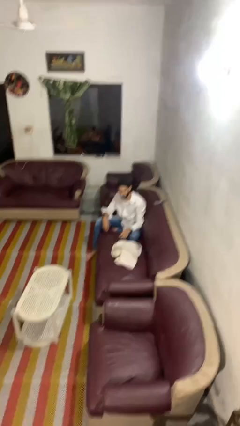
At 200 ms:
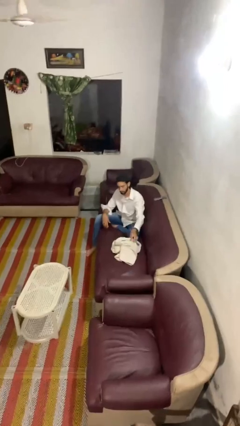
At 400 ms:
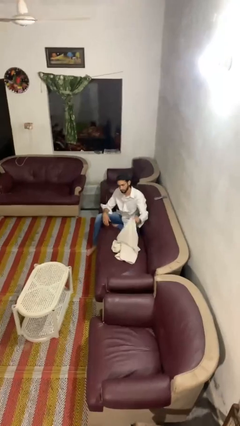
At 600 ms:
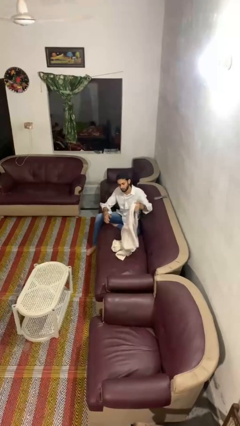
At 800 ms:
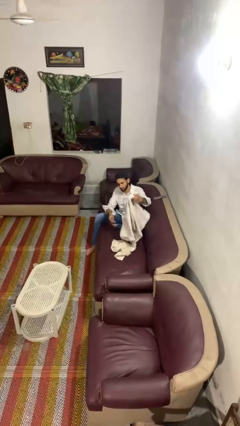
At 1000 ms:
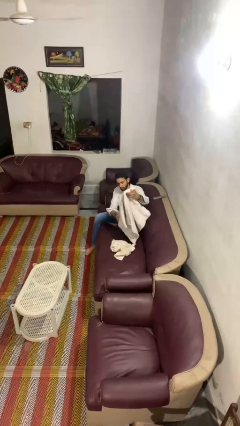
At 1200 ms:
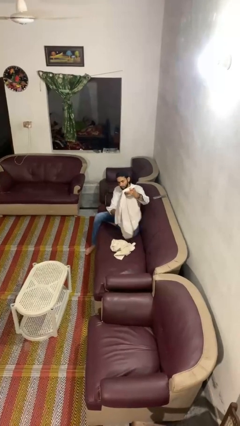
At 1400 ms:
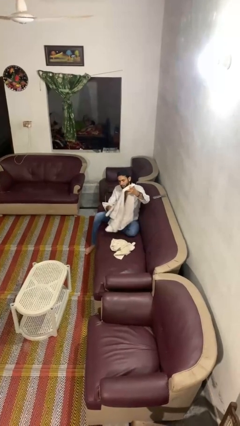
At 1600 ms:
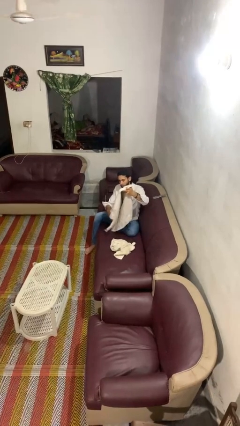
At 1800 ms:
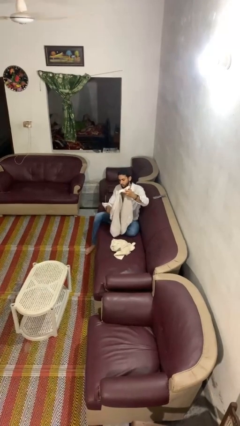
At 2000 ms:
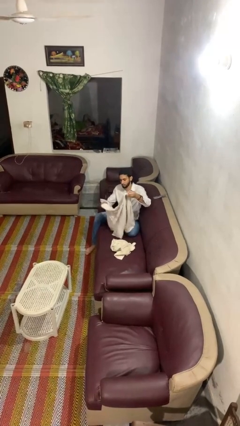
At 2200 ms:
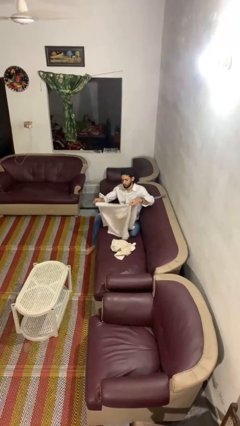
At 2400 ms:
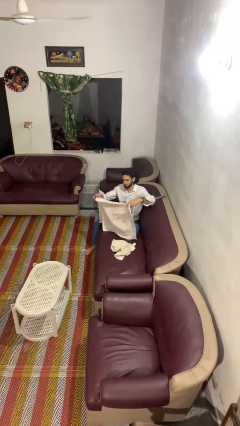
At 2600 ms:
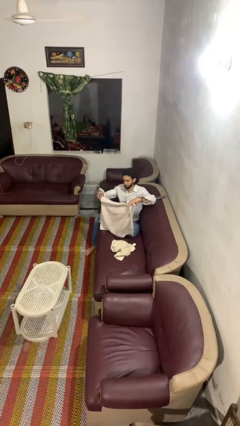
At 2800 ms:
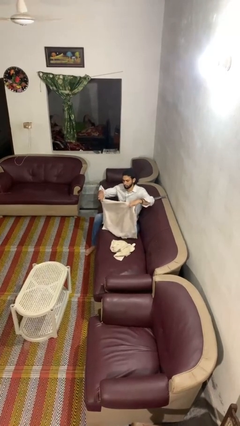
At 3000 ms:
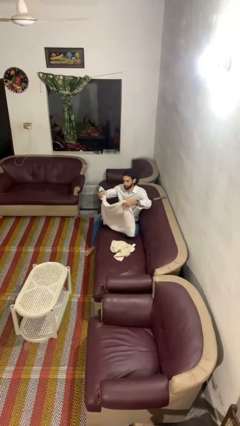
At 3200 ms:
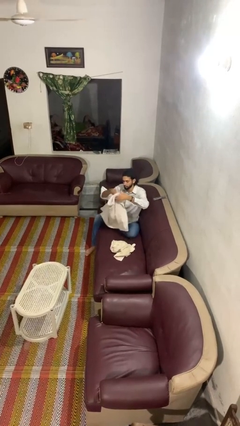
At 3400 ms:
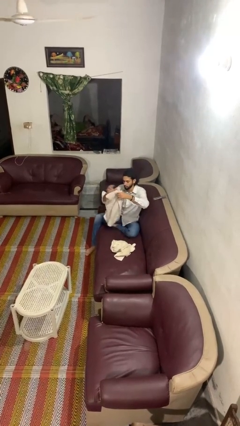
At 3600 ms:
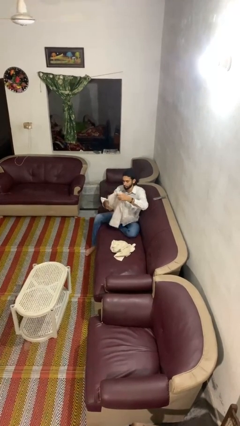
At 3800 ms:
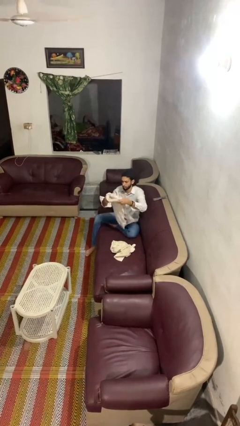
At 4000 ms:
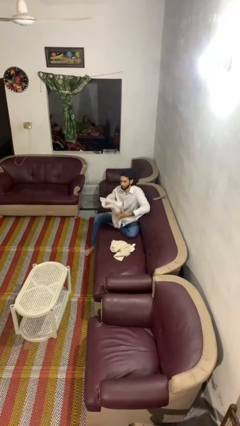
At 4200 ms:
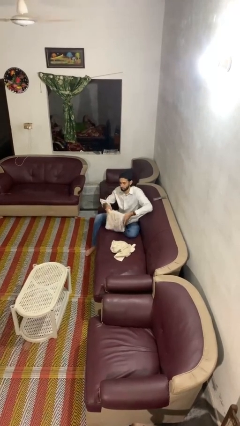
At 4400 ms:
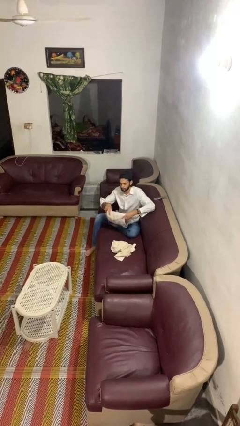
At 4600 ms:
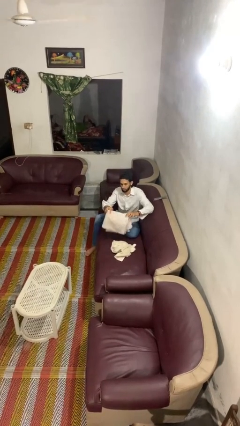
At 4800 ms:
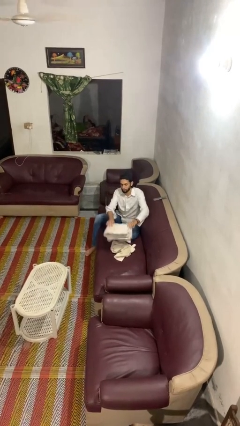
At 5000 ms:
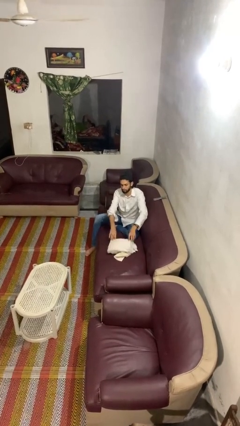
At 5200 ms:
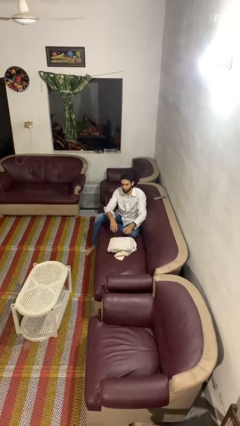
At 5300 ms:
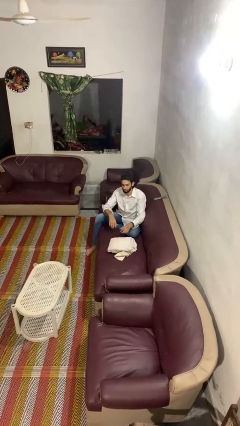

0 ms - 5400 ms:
person folds towel

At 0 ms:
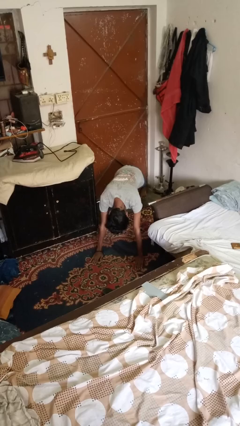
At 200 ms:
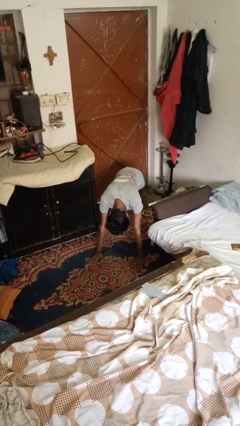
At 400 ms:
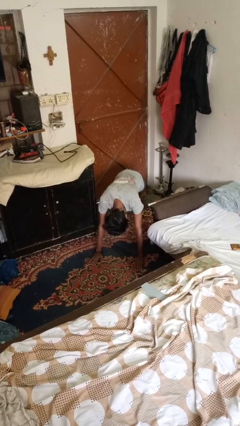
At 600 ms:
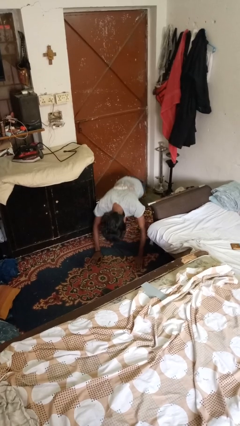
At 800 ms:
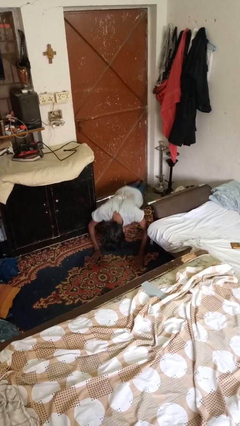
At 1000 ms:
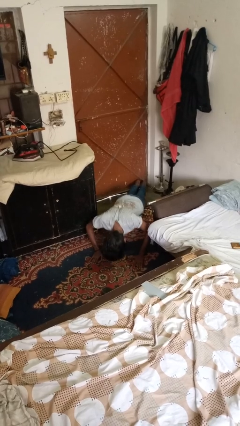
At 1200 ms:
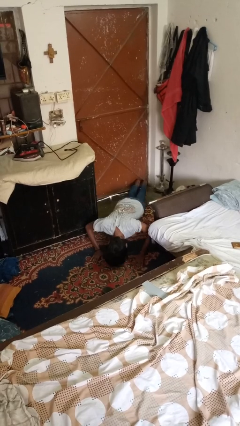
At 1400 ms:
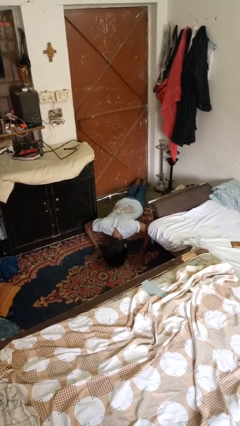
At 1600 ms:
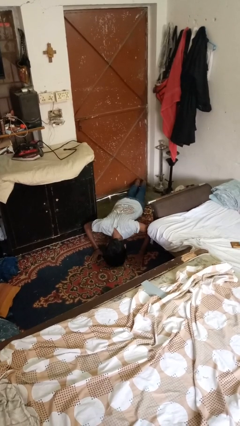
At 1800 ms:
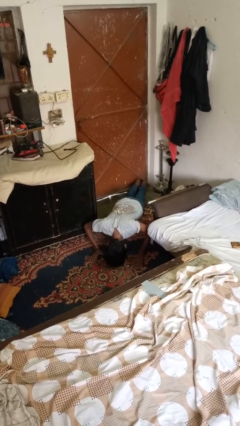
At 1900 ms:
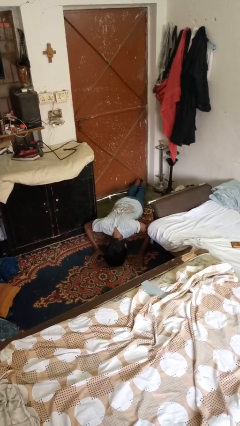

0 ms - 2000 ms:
person exercises with pushup

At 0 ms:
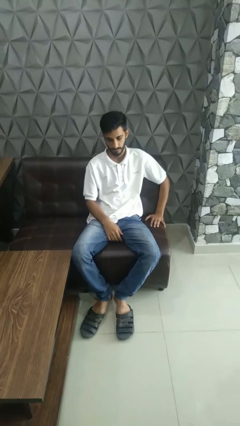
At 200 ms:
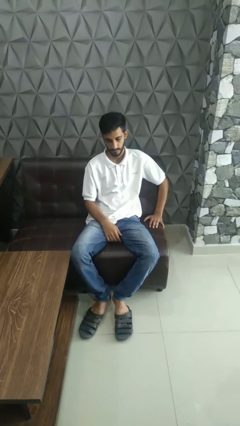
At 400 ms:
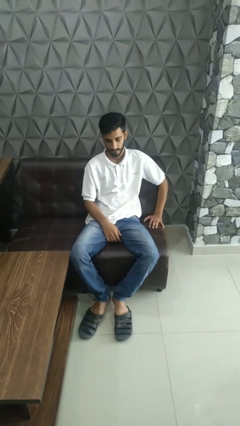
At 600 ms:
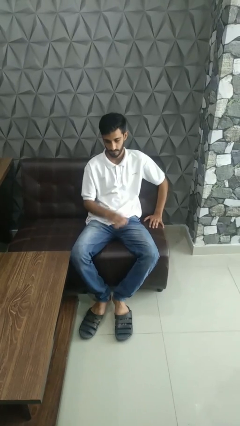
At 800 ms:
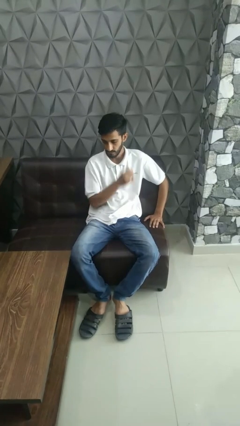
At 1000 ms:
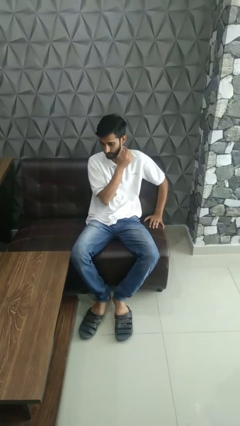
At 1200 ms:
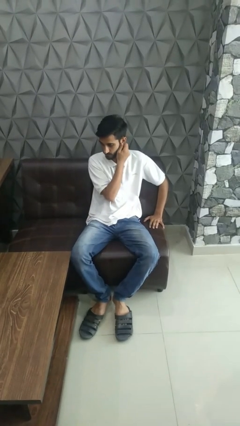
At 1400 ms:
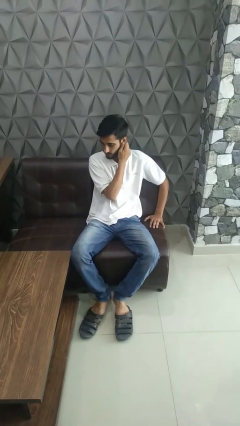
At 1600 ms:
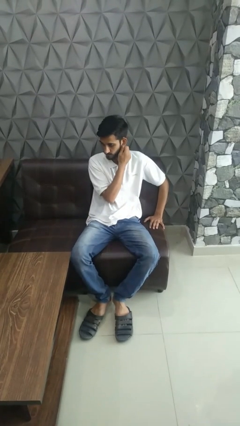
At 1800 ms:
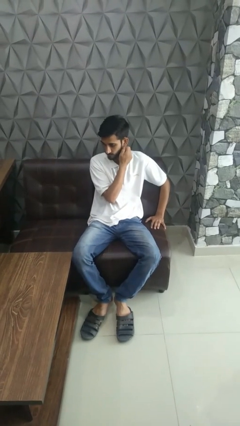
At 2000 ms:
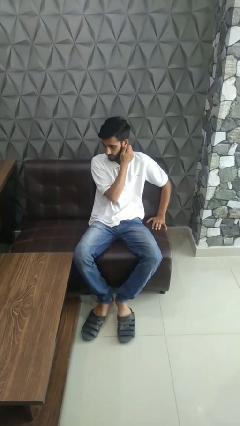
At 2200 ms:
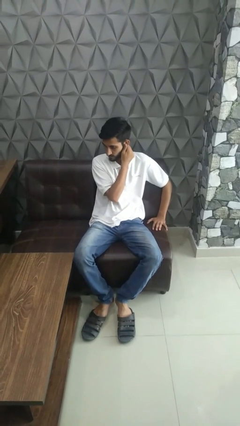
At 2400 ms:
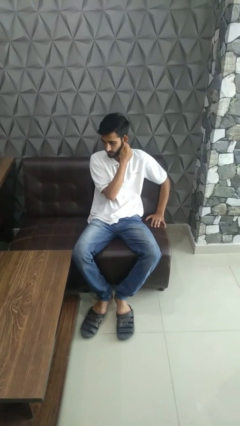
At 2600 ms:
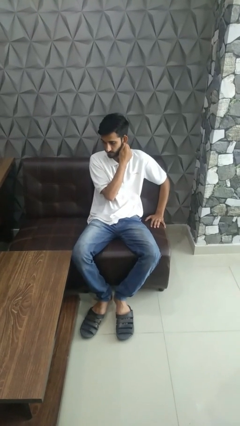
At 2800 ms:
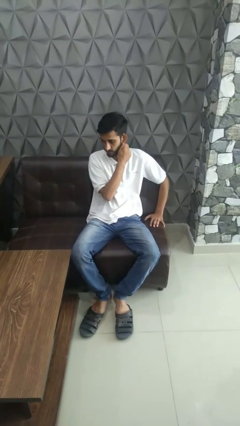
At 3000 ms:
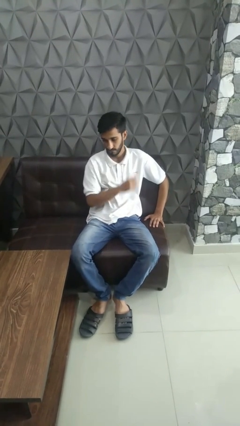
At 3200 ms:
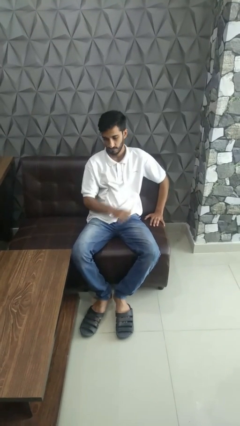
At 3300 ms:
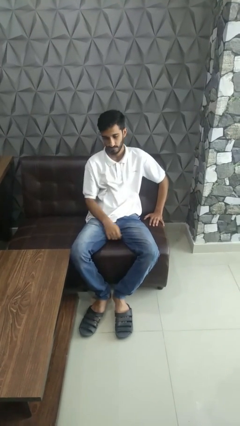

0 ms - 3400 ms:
person touches earlobe

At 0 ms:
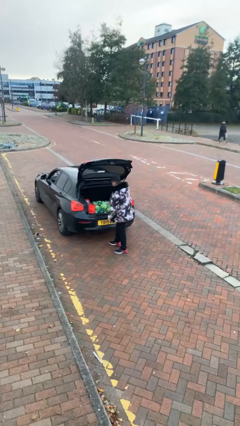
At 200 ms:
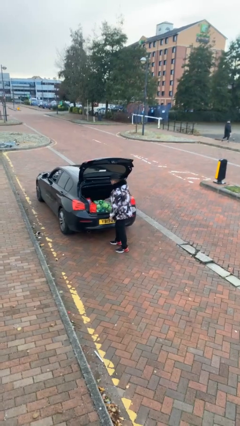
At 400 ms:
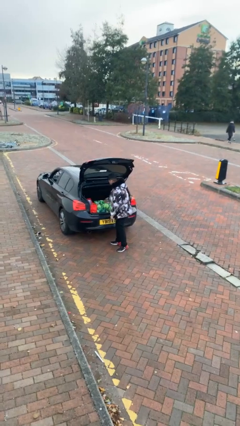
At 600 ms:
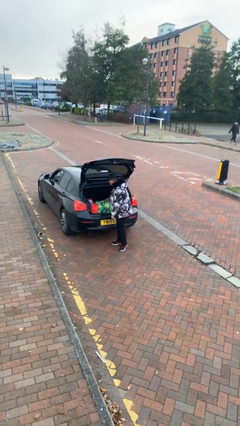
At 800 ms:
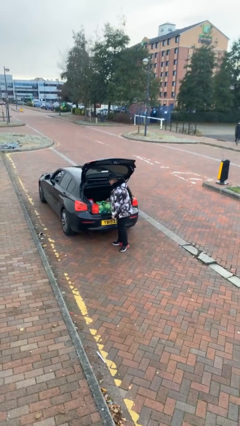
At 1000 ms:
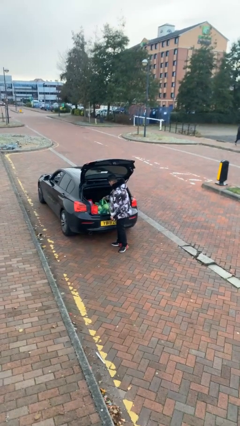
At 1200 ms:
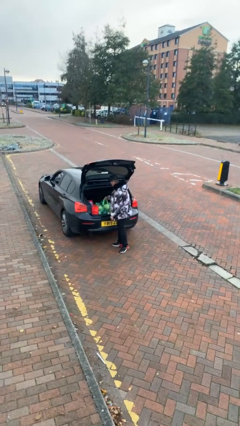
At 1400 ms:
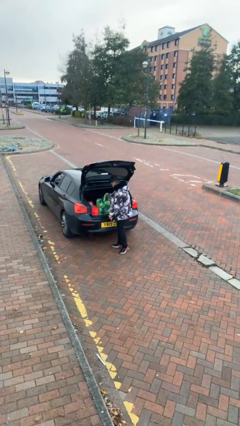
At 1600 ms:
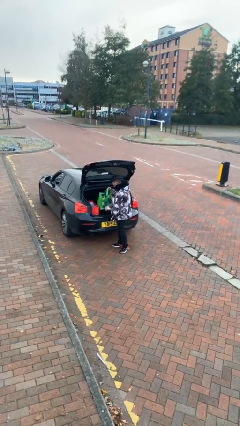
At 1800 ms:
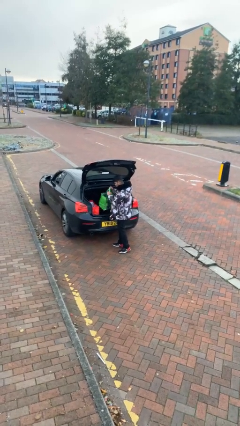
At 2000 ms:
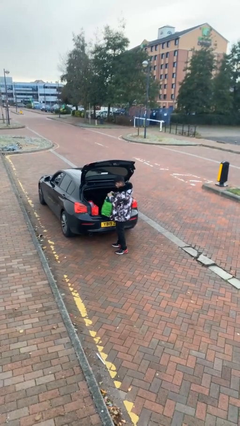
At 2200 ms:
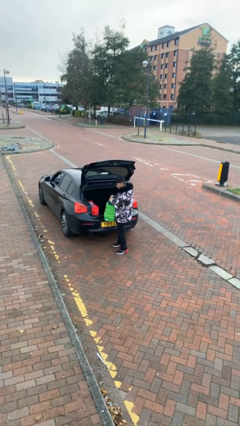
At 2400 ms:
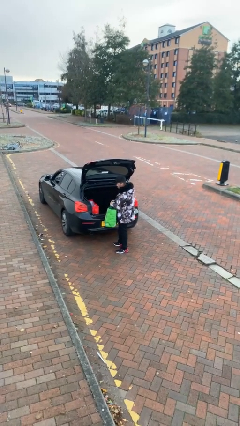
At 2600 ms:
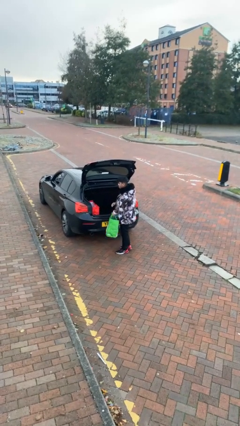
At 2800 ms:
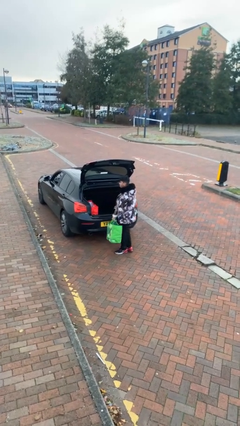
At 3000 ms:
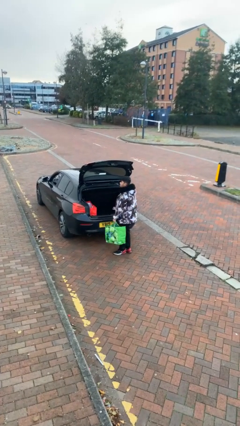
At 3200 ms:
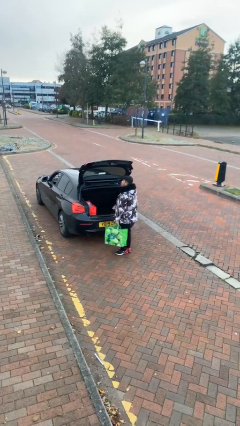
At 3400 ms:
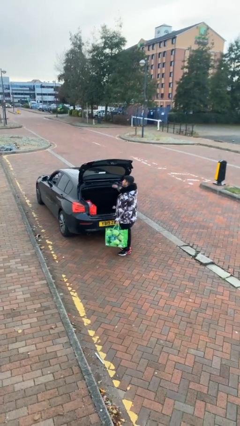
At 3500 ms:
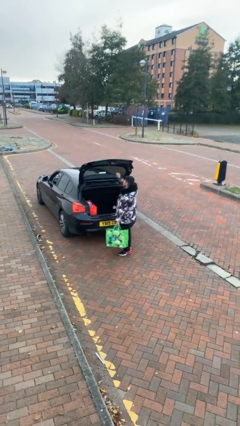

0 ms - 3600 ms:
person unloads car

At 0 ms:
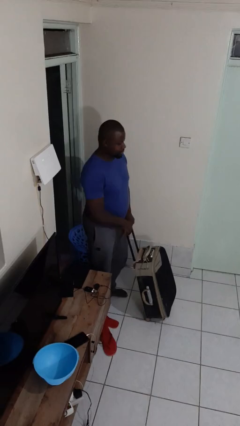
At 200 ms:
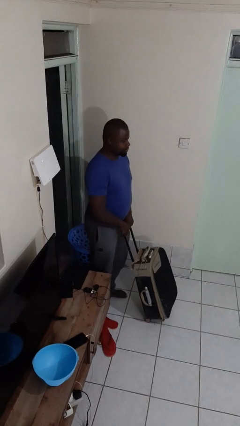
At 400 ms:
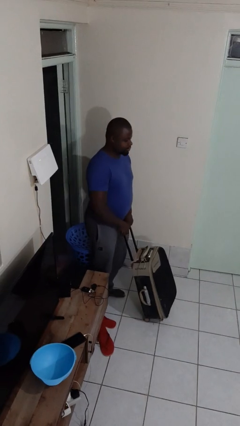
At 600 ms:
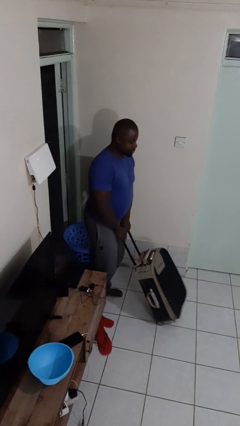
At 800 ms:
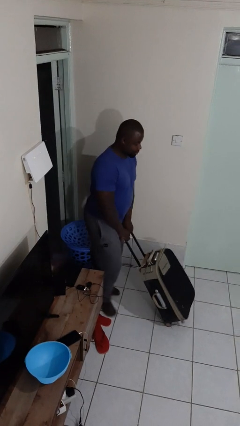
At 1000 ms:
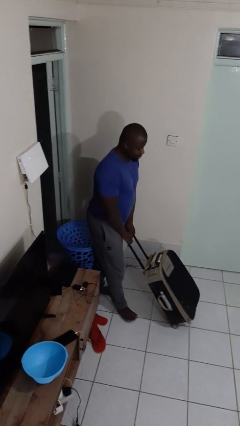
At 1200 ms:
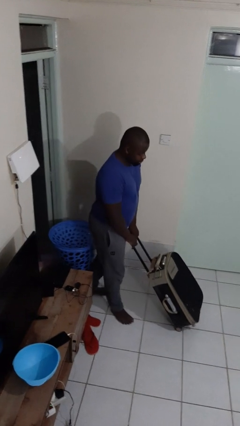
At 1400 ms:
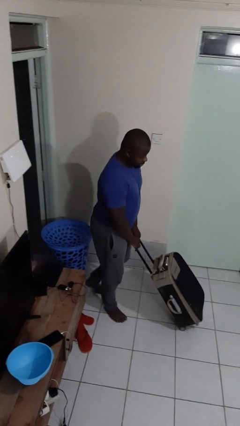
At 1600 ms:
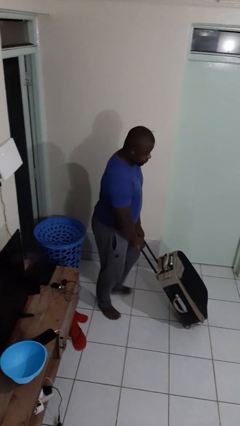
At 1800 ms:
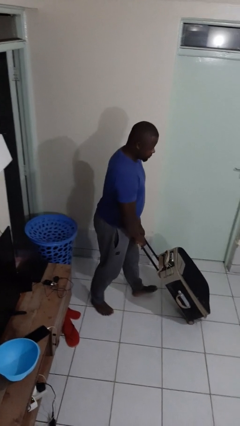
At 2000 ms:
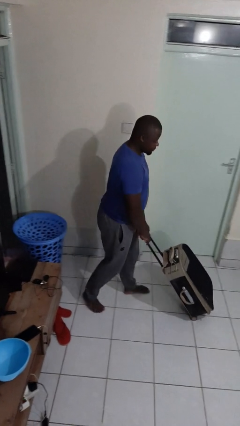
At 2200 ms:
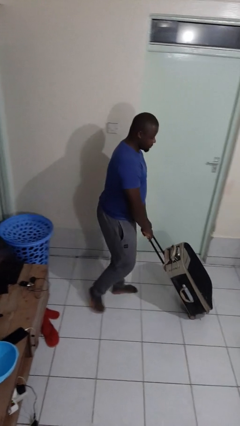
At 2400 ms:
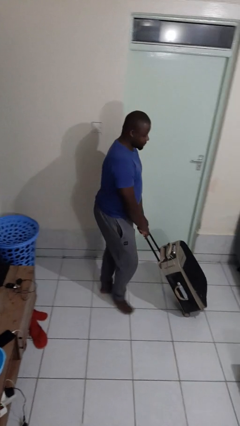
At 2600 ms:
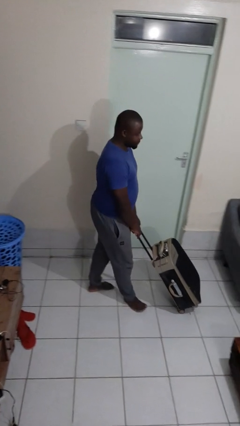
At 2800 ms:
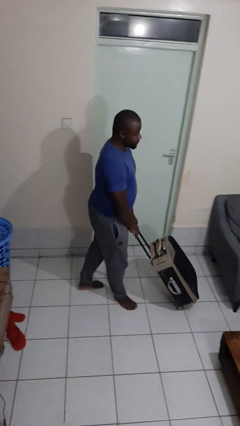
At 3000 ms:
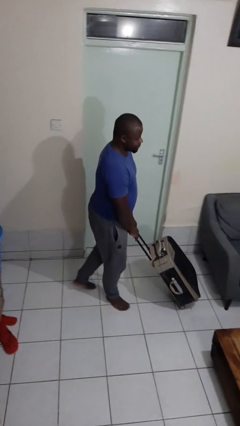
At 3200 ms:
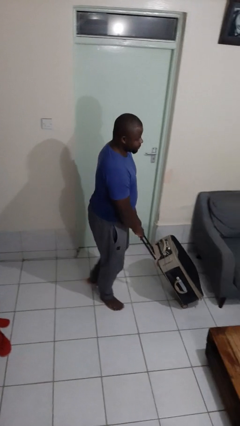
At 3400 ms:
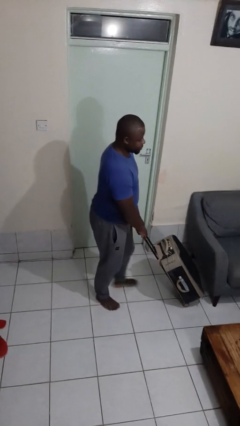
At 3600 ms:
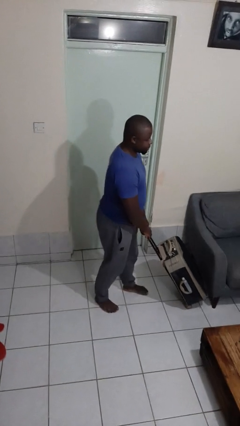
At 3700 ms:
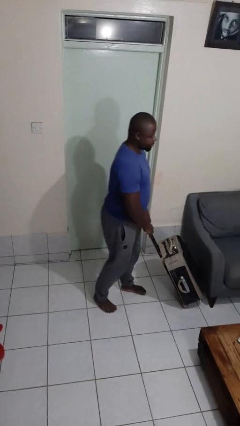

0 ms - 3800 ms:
person pushes wheeled cart
